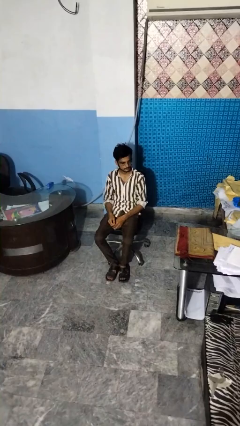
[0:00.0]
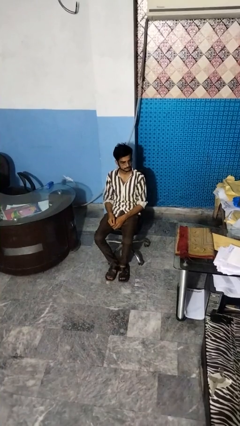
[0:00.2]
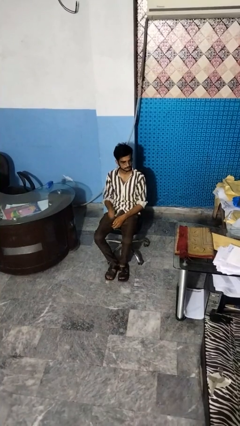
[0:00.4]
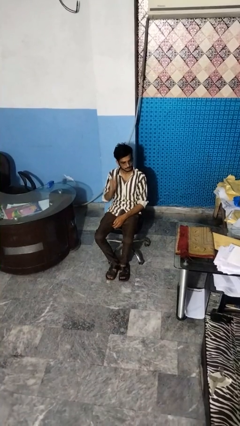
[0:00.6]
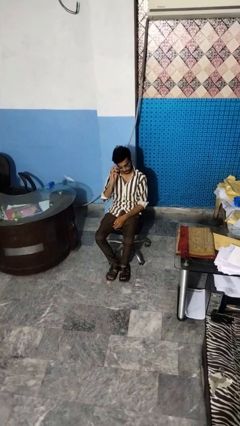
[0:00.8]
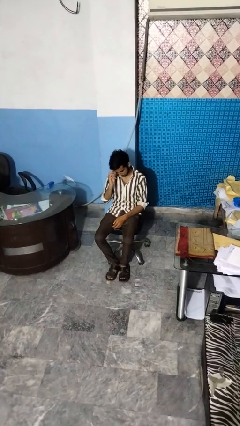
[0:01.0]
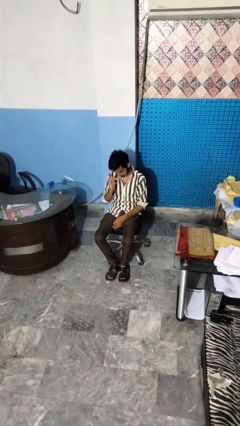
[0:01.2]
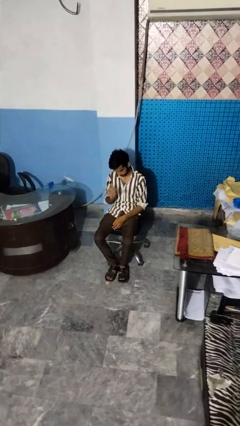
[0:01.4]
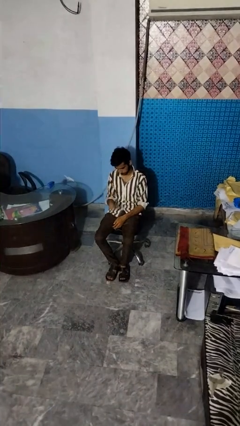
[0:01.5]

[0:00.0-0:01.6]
person takes off glasses

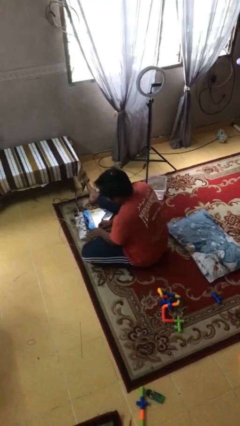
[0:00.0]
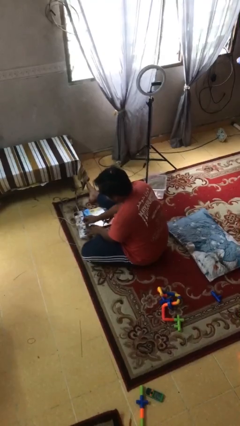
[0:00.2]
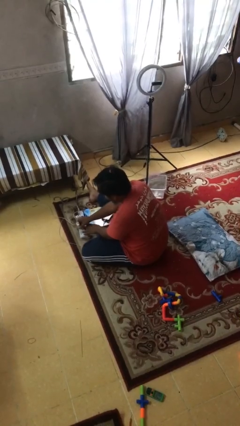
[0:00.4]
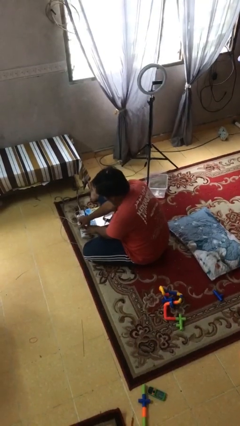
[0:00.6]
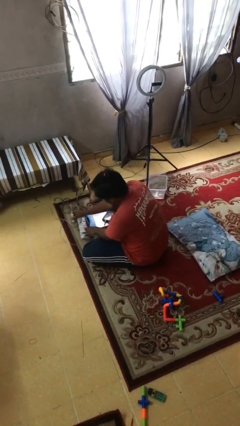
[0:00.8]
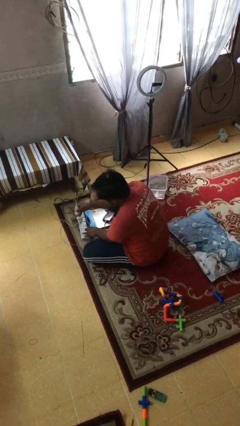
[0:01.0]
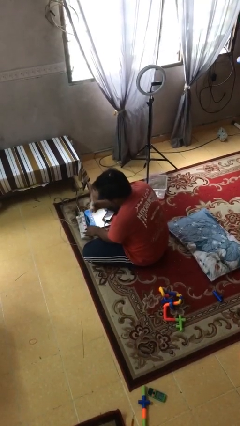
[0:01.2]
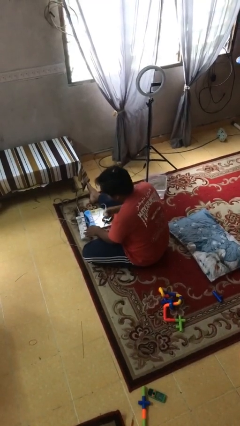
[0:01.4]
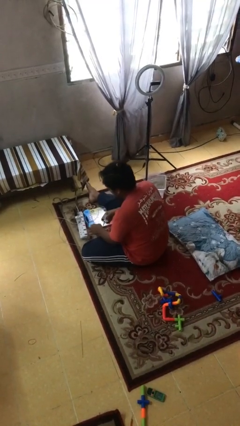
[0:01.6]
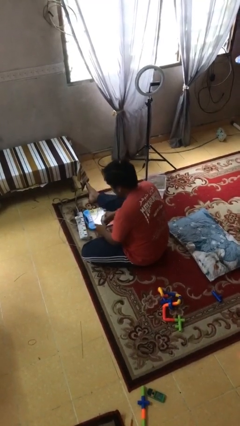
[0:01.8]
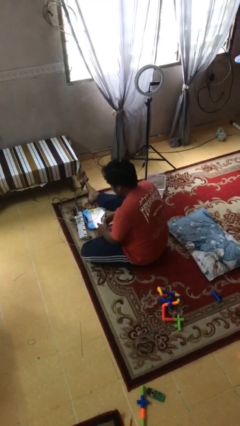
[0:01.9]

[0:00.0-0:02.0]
person unplugs from electrical socket

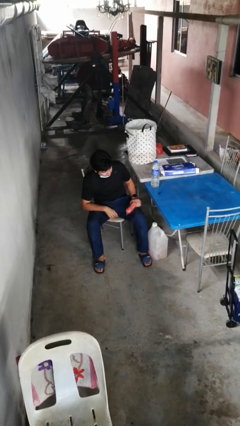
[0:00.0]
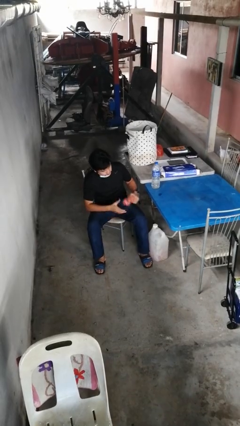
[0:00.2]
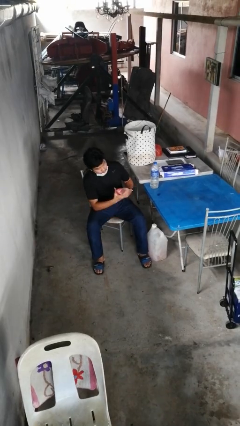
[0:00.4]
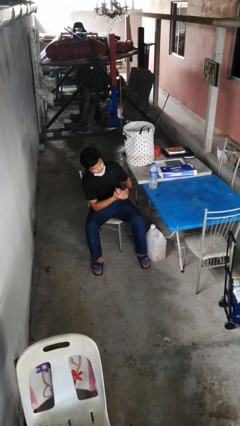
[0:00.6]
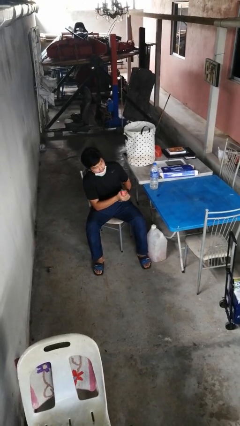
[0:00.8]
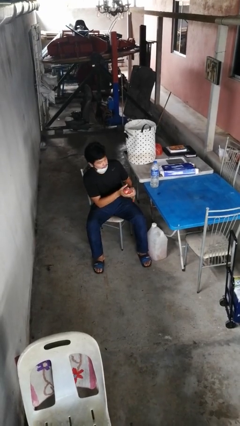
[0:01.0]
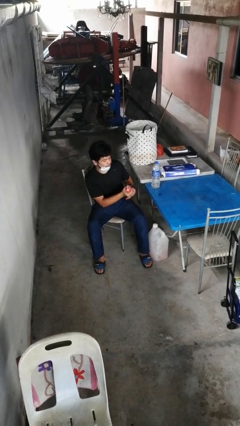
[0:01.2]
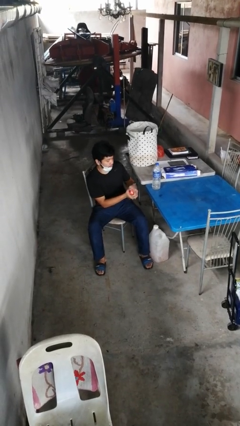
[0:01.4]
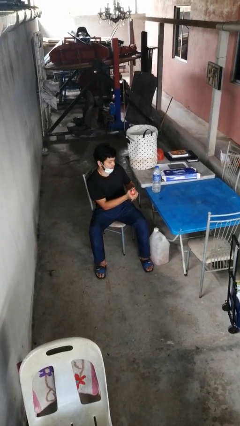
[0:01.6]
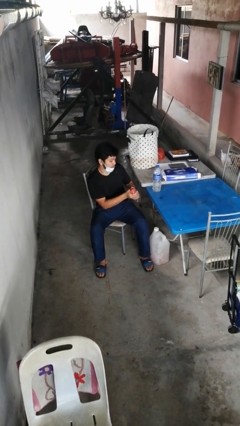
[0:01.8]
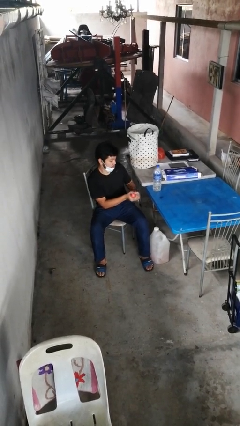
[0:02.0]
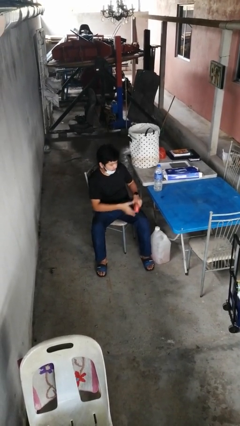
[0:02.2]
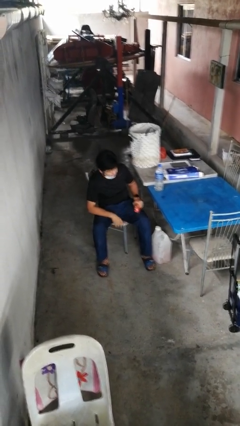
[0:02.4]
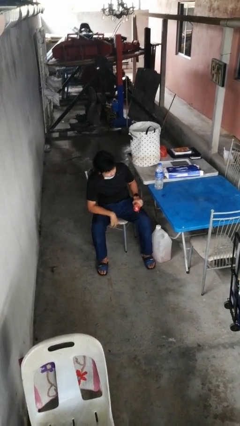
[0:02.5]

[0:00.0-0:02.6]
person squeezes object

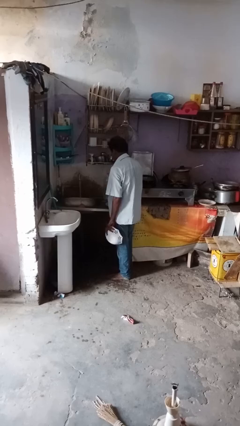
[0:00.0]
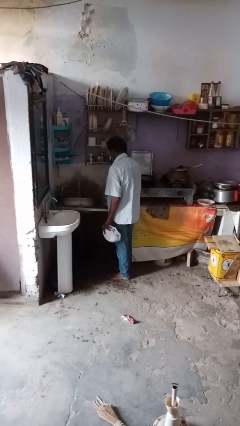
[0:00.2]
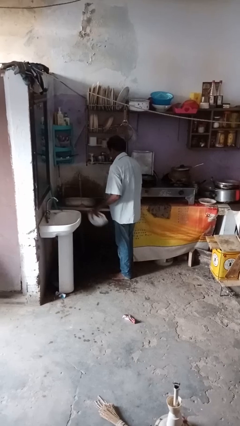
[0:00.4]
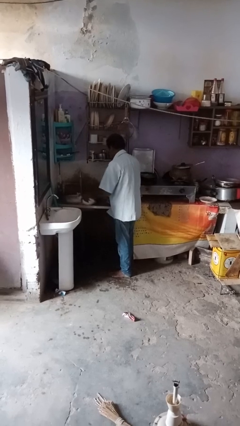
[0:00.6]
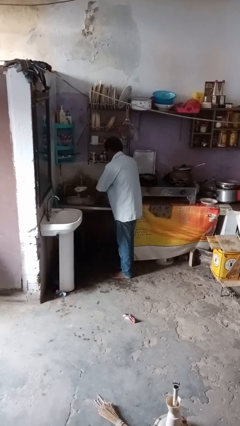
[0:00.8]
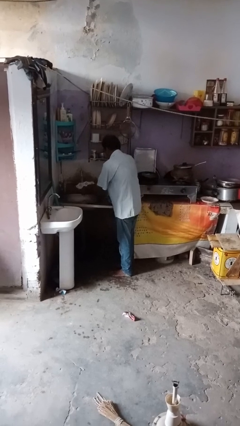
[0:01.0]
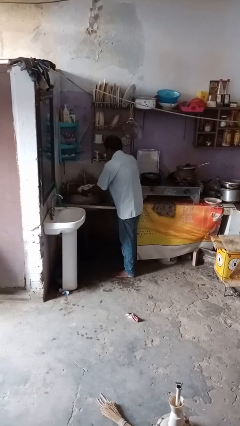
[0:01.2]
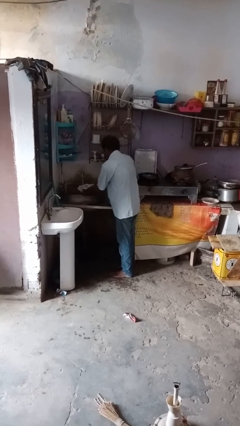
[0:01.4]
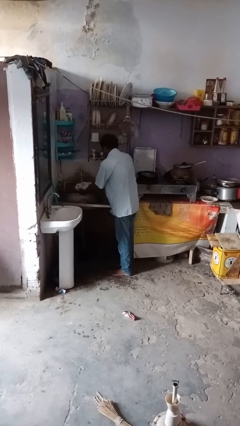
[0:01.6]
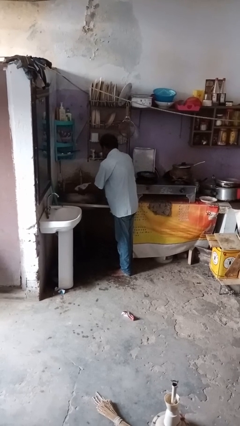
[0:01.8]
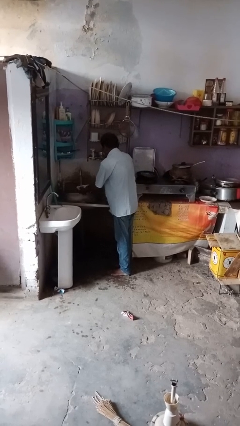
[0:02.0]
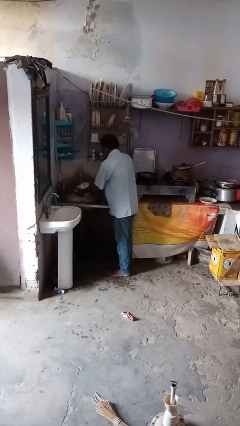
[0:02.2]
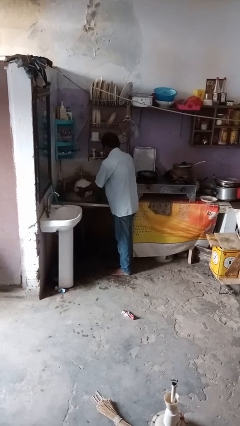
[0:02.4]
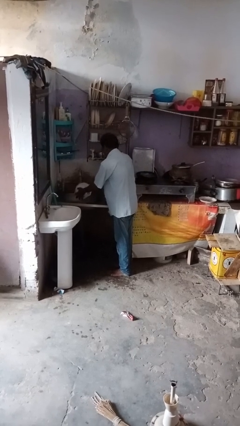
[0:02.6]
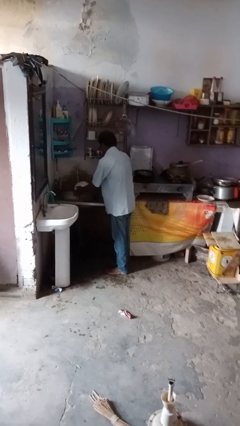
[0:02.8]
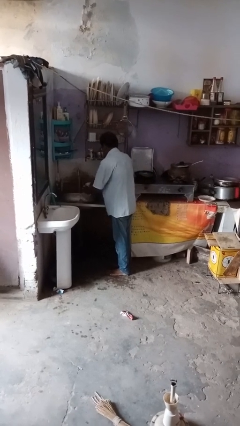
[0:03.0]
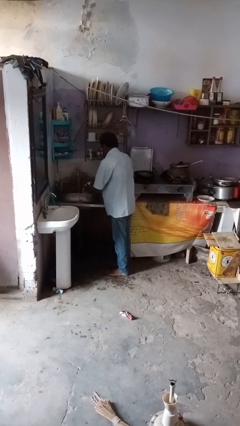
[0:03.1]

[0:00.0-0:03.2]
person washes dish

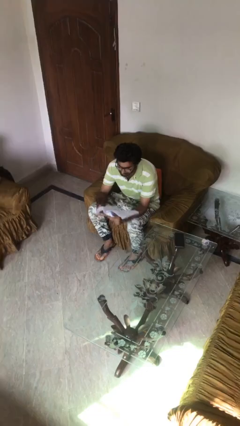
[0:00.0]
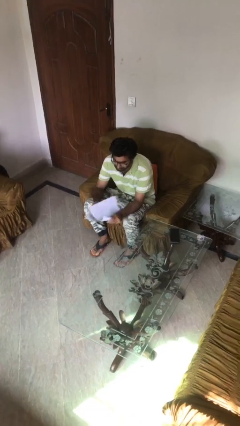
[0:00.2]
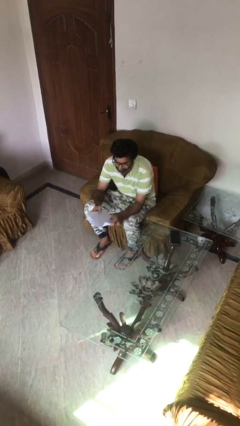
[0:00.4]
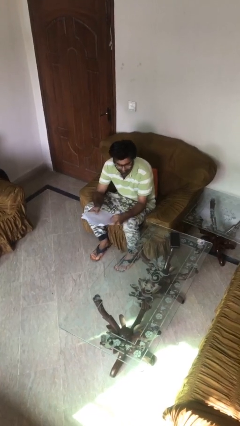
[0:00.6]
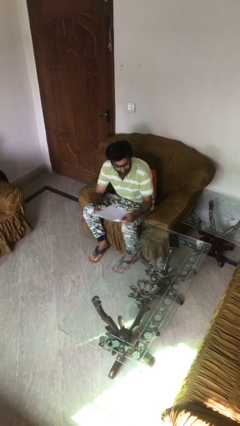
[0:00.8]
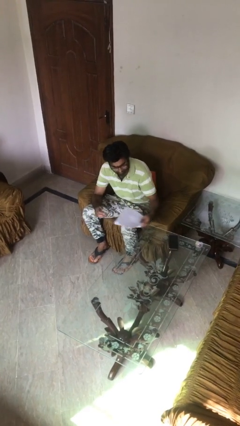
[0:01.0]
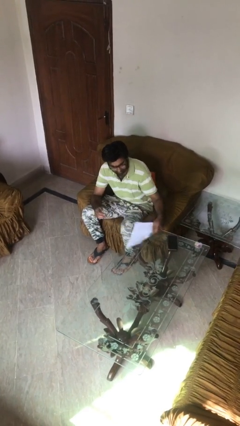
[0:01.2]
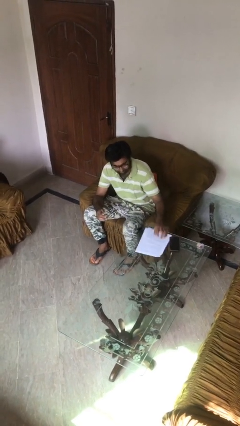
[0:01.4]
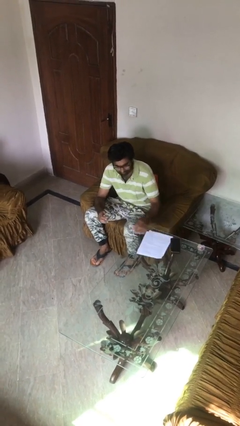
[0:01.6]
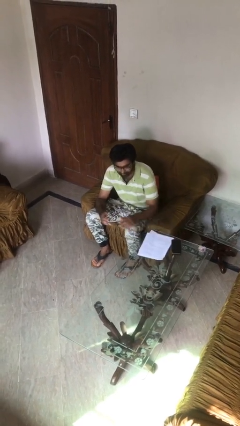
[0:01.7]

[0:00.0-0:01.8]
person puts down object on table

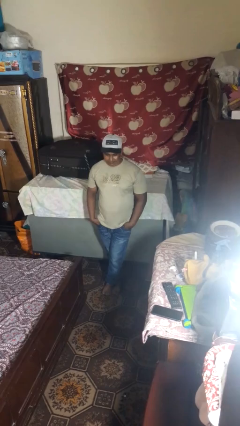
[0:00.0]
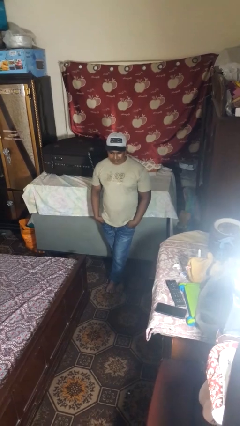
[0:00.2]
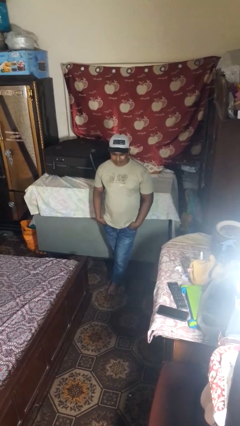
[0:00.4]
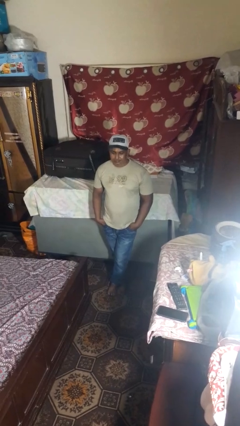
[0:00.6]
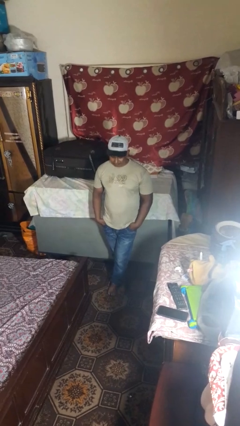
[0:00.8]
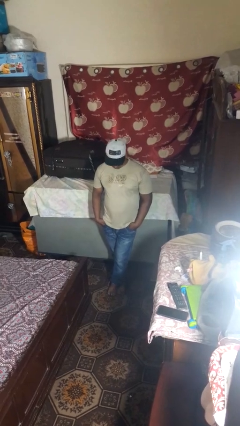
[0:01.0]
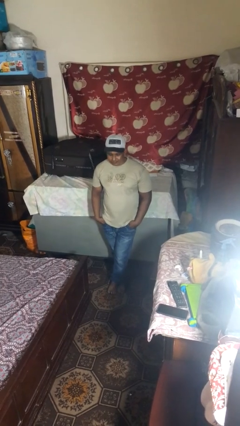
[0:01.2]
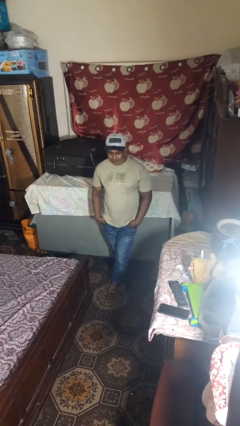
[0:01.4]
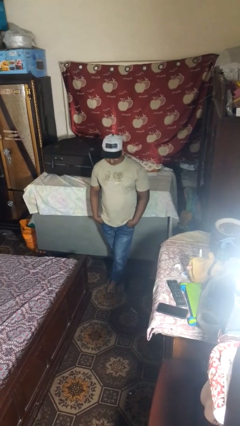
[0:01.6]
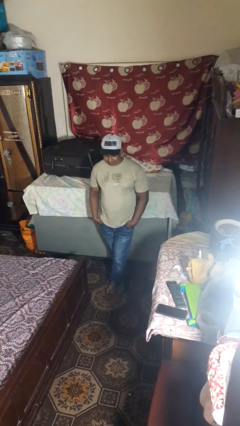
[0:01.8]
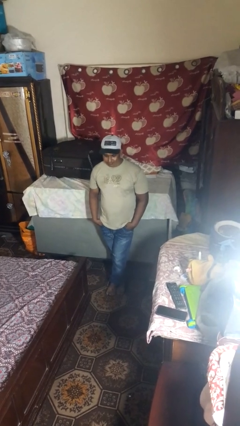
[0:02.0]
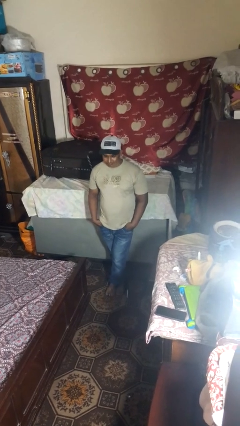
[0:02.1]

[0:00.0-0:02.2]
person nods head

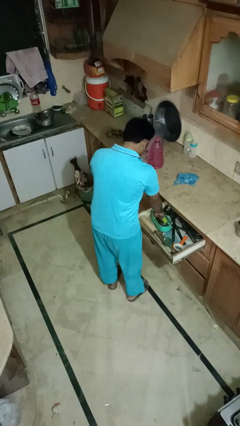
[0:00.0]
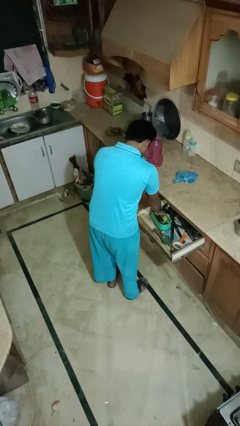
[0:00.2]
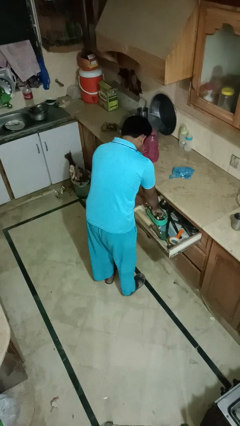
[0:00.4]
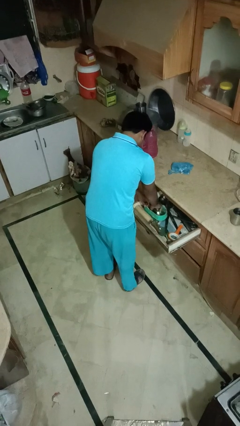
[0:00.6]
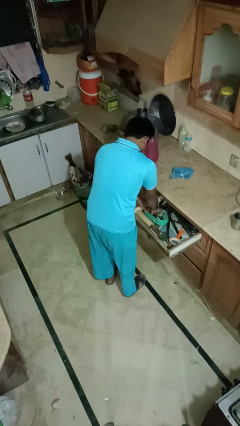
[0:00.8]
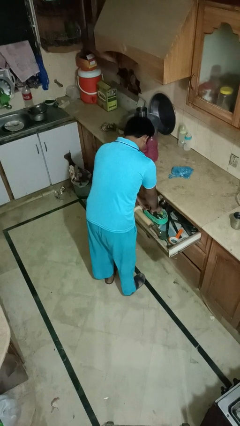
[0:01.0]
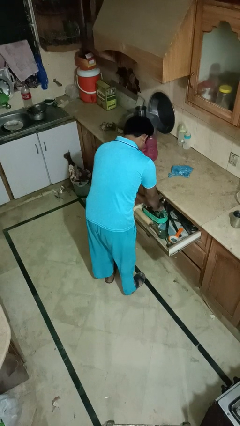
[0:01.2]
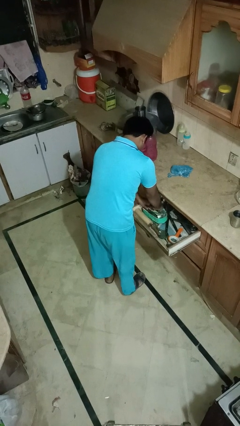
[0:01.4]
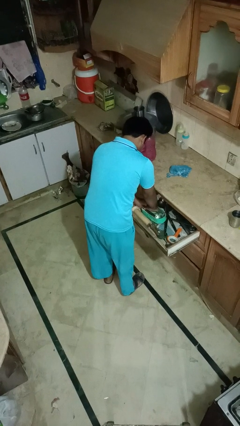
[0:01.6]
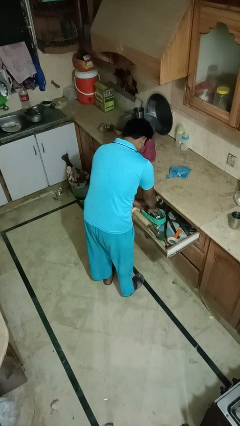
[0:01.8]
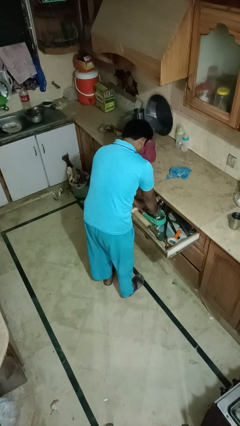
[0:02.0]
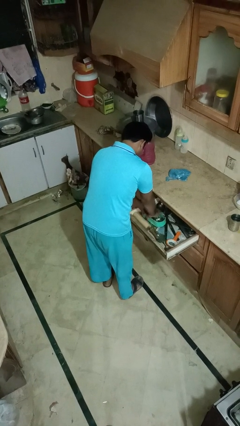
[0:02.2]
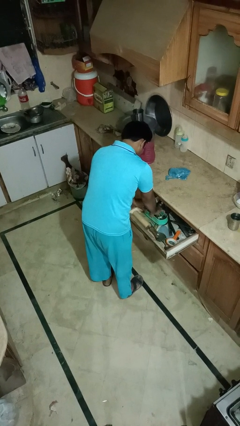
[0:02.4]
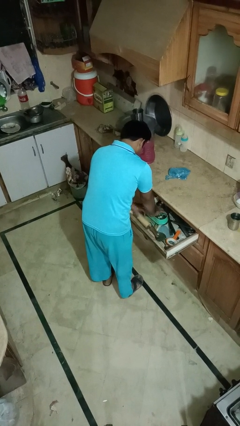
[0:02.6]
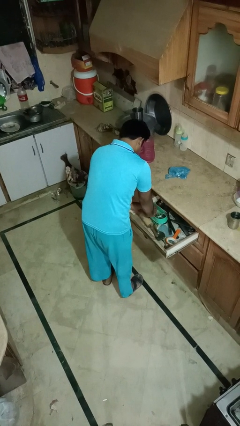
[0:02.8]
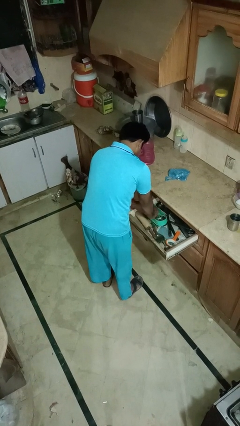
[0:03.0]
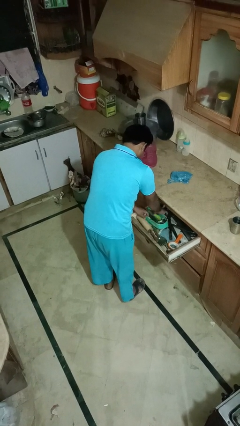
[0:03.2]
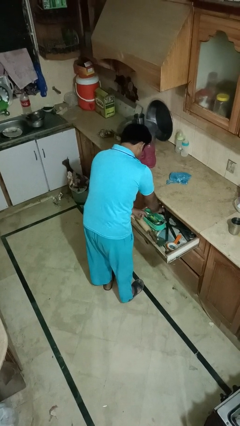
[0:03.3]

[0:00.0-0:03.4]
person searches in kitchen drawer

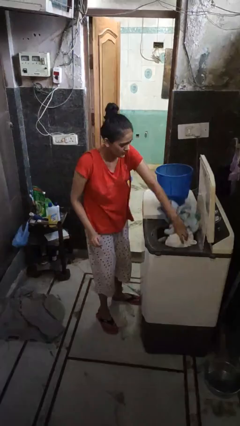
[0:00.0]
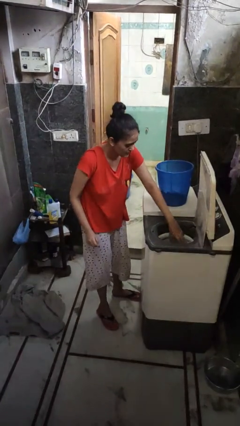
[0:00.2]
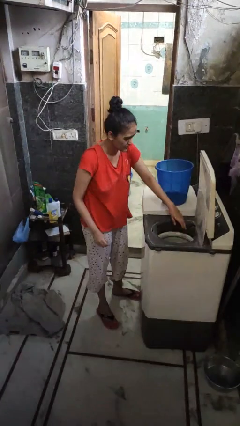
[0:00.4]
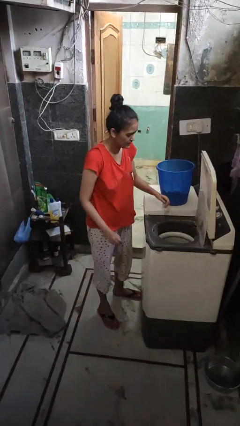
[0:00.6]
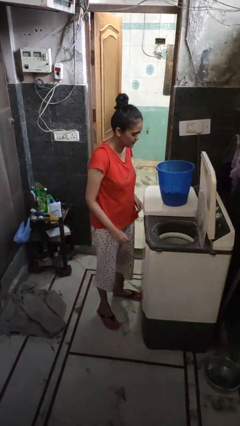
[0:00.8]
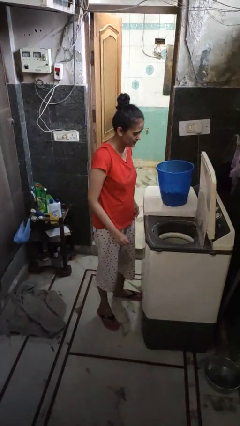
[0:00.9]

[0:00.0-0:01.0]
person loads clotheswasher
